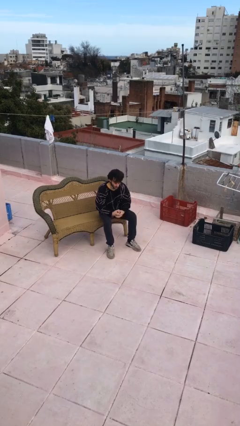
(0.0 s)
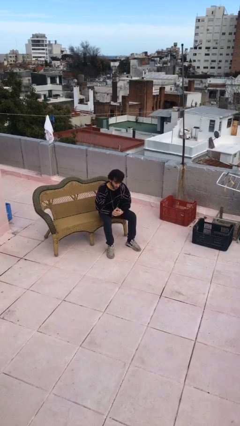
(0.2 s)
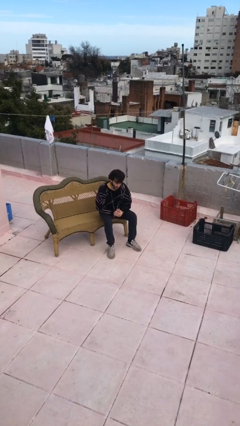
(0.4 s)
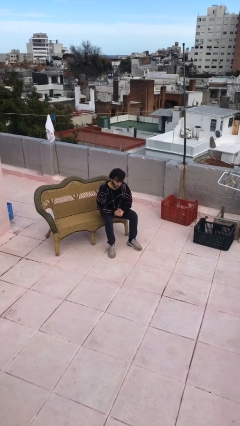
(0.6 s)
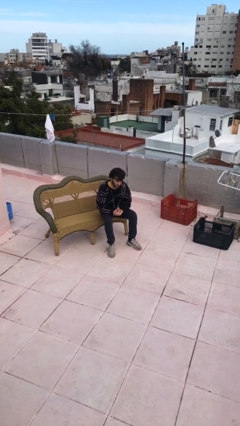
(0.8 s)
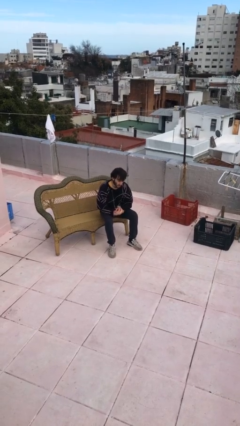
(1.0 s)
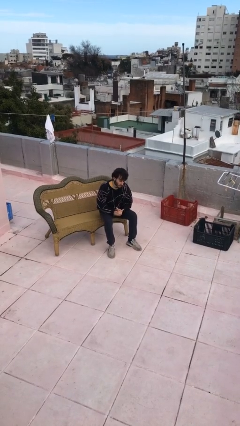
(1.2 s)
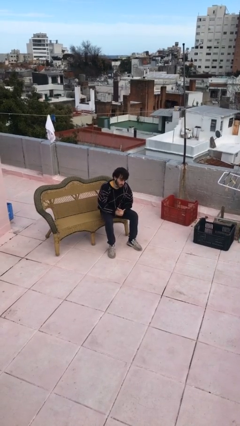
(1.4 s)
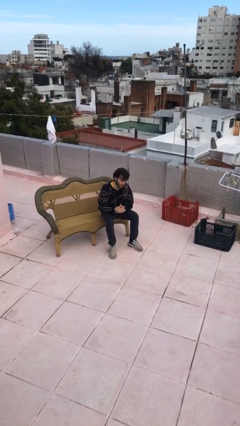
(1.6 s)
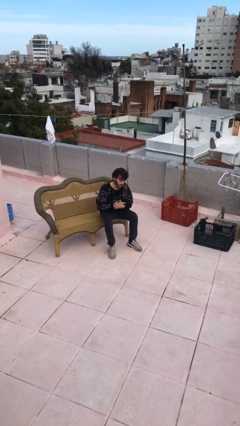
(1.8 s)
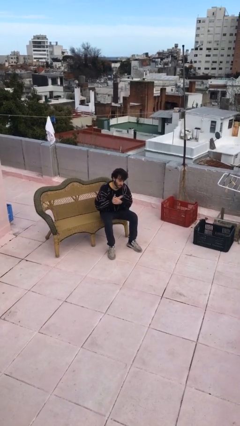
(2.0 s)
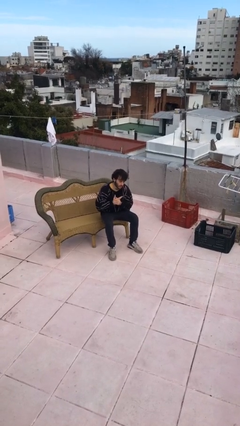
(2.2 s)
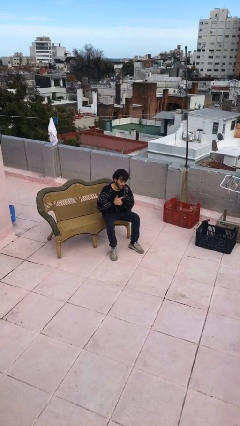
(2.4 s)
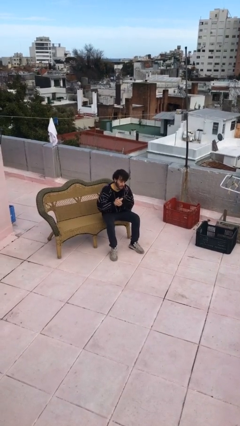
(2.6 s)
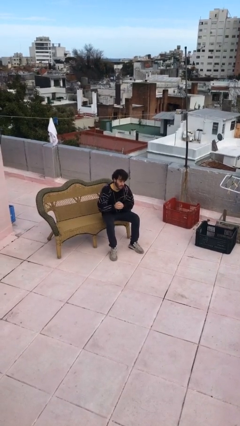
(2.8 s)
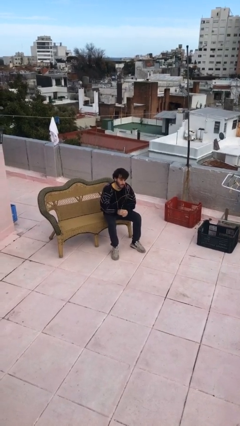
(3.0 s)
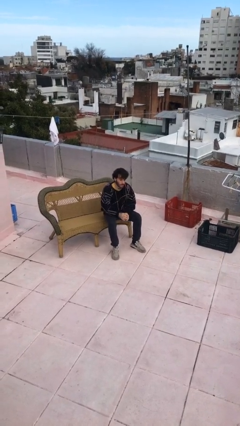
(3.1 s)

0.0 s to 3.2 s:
person cracks knuckles

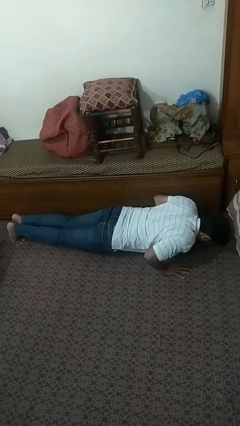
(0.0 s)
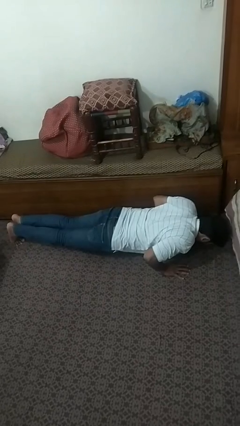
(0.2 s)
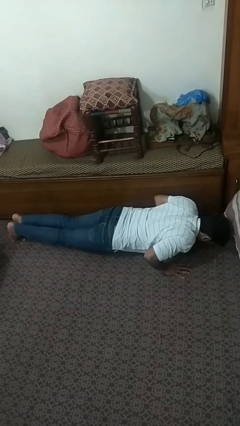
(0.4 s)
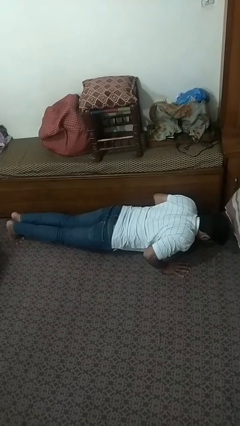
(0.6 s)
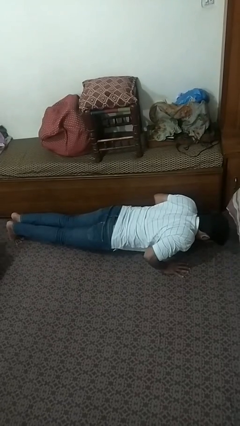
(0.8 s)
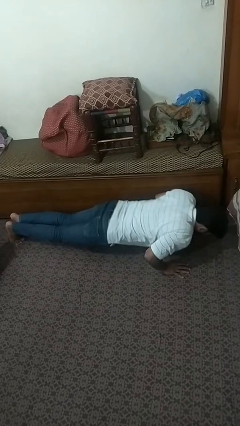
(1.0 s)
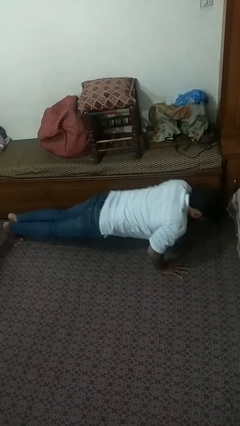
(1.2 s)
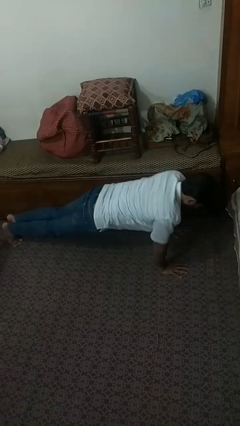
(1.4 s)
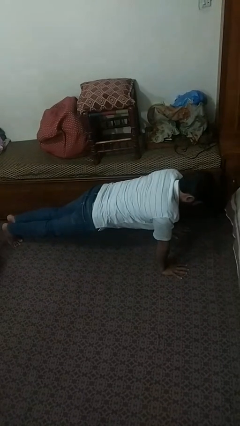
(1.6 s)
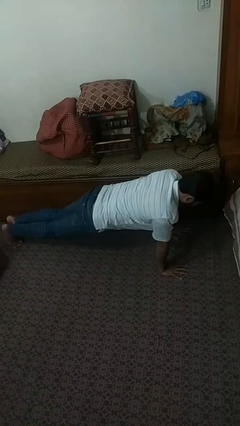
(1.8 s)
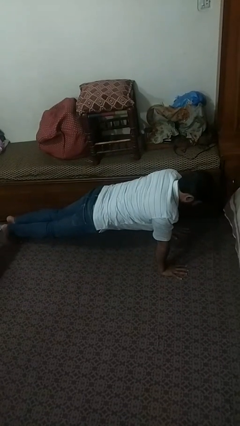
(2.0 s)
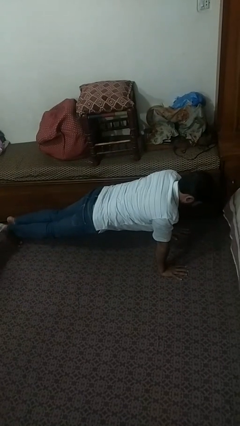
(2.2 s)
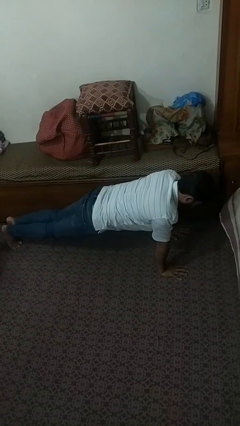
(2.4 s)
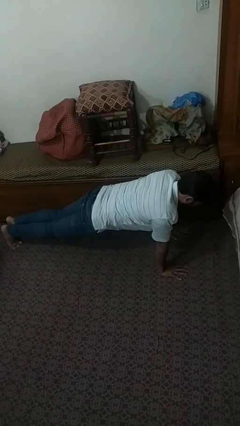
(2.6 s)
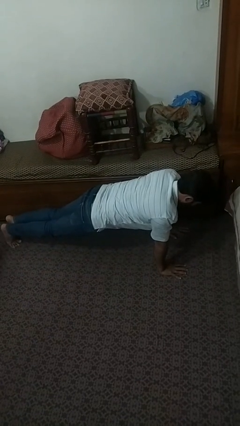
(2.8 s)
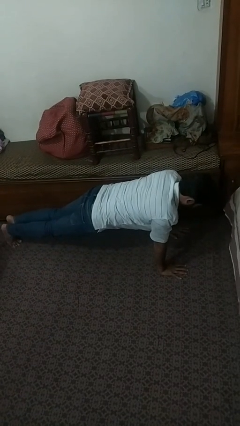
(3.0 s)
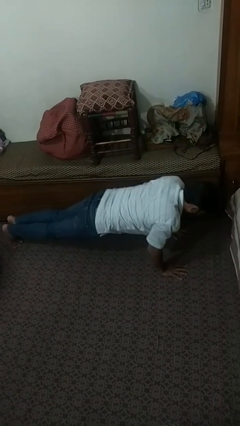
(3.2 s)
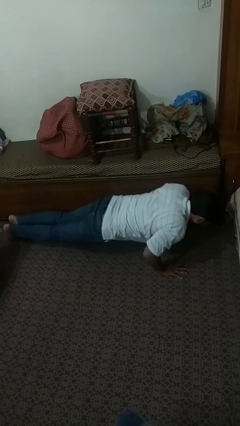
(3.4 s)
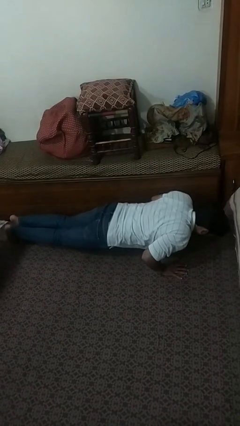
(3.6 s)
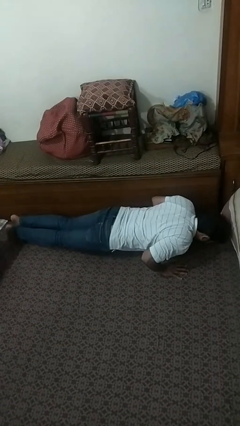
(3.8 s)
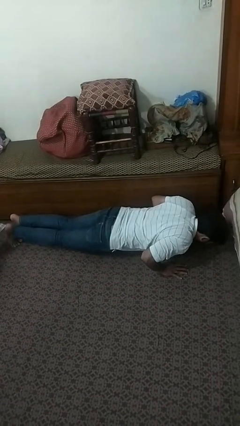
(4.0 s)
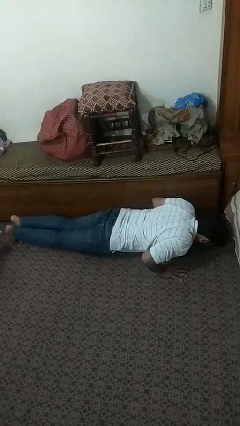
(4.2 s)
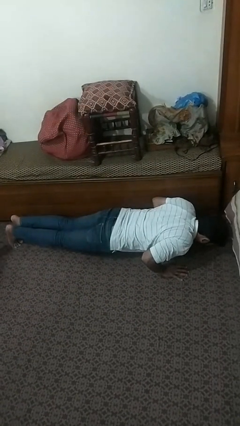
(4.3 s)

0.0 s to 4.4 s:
person exercises with pushup

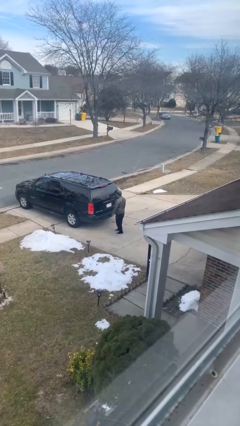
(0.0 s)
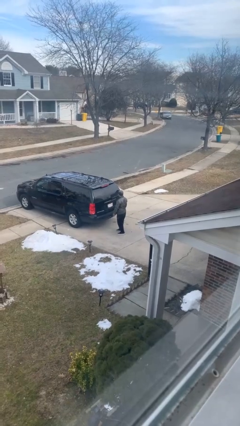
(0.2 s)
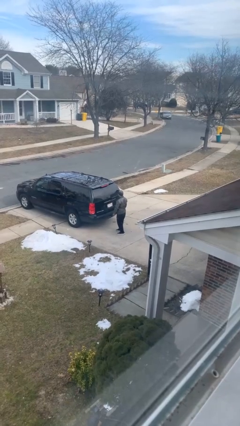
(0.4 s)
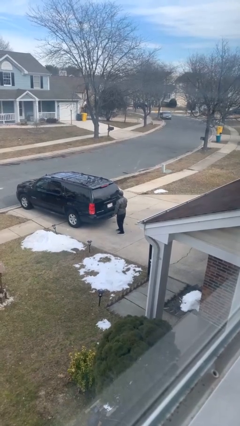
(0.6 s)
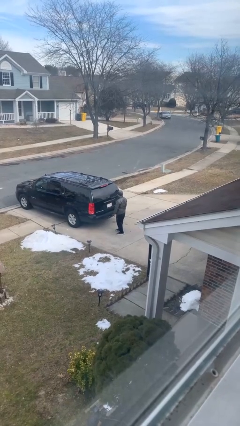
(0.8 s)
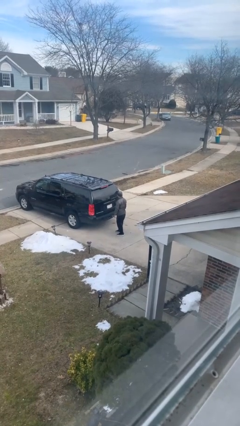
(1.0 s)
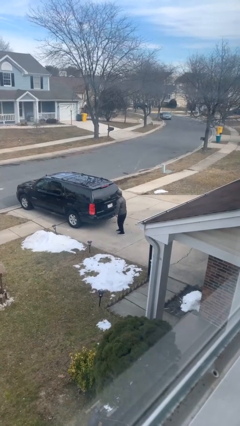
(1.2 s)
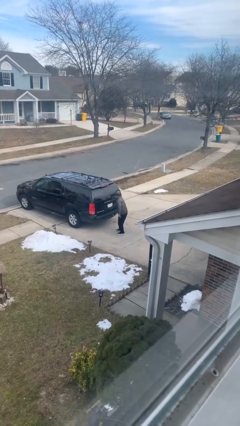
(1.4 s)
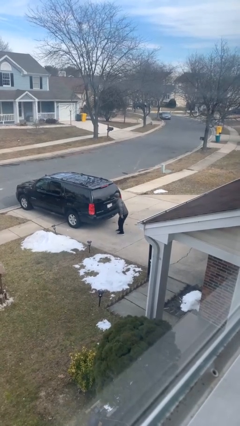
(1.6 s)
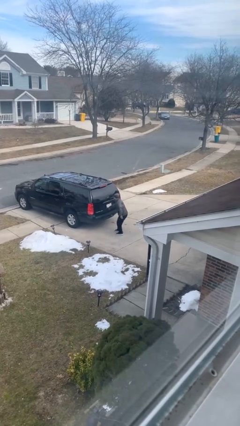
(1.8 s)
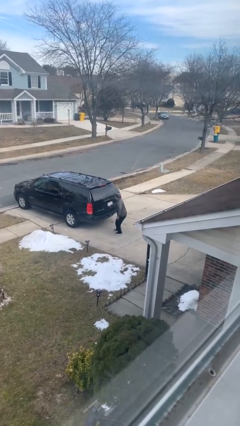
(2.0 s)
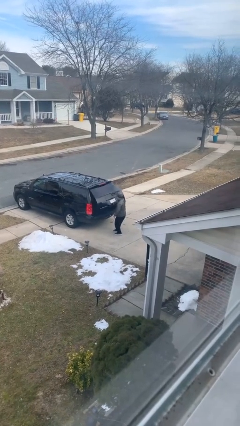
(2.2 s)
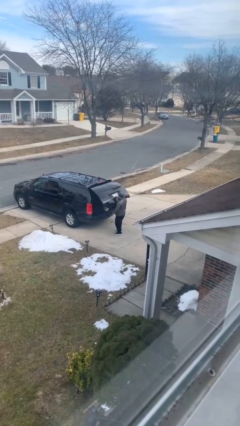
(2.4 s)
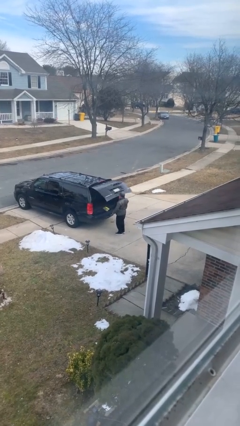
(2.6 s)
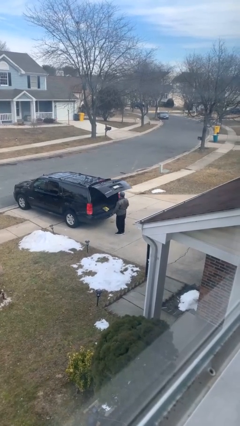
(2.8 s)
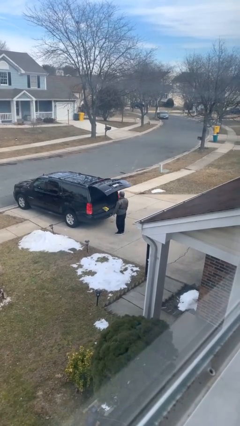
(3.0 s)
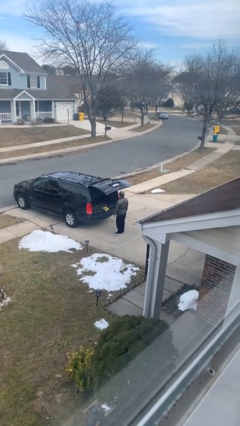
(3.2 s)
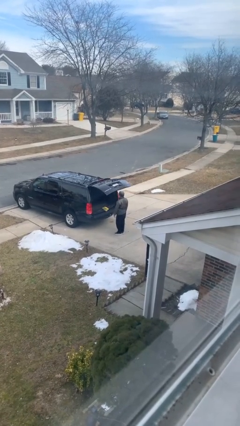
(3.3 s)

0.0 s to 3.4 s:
person opens car trunk

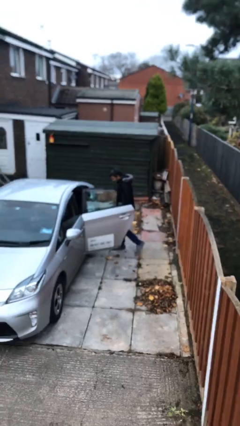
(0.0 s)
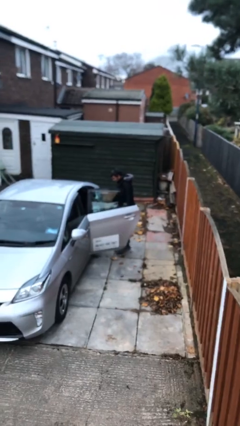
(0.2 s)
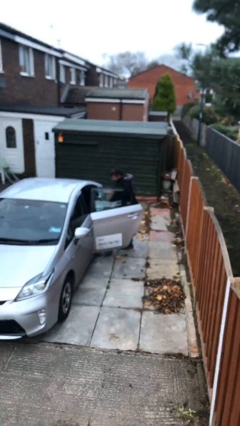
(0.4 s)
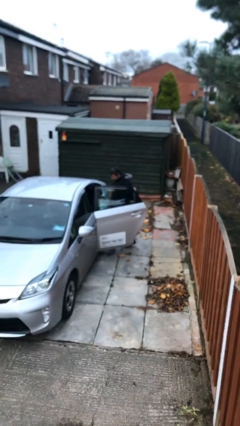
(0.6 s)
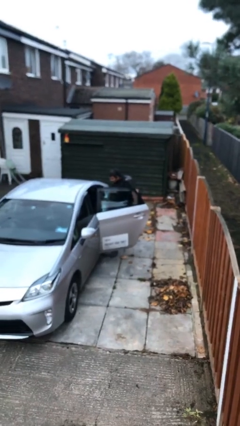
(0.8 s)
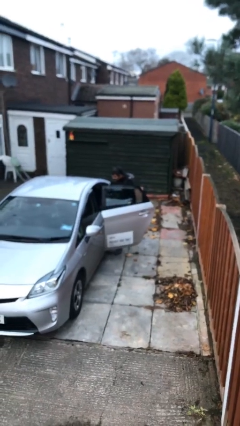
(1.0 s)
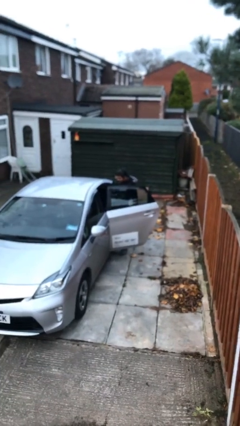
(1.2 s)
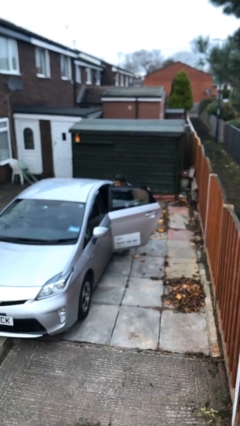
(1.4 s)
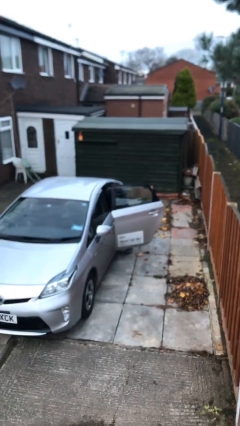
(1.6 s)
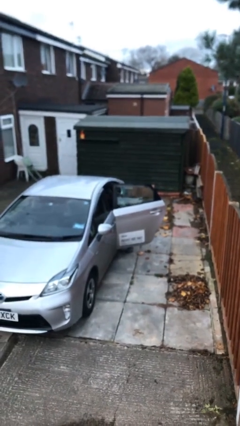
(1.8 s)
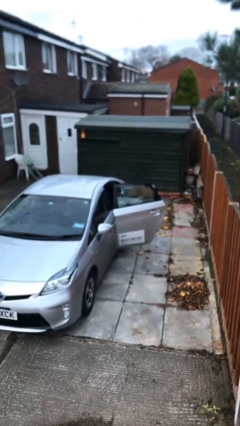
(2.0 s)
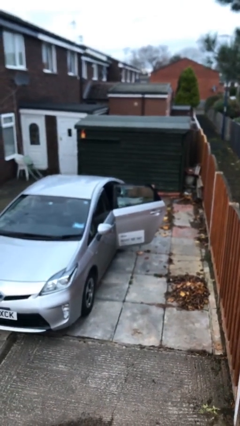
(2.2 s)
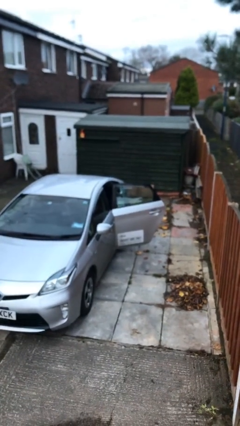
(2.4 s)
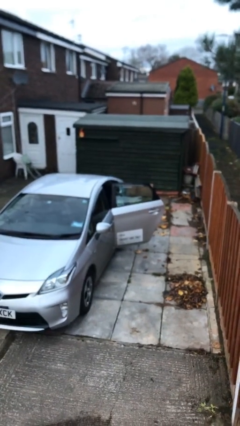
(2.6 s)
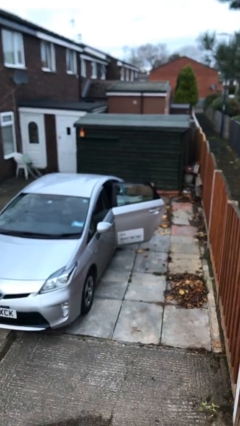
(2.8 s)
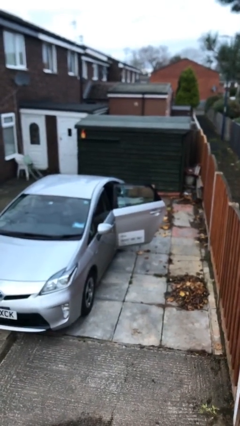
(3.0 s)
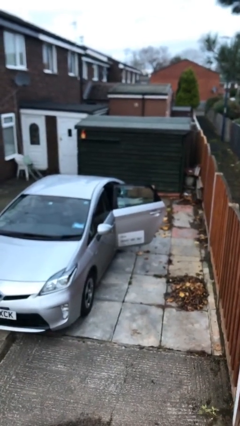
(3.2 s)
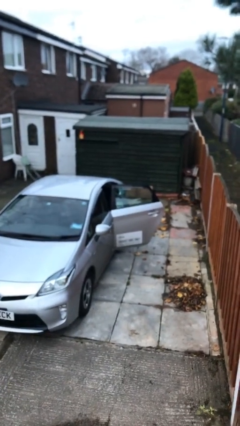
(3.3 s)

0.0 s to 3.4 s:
person enters car

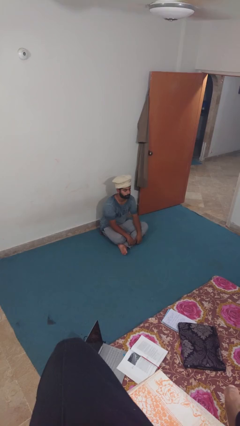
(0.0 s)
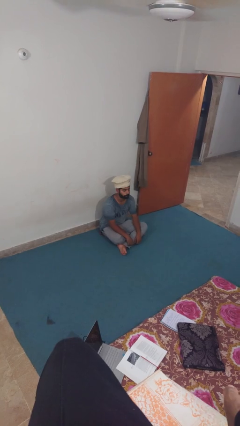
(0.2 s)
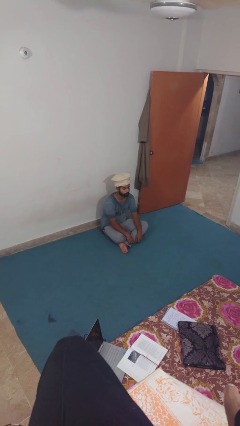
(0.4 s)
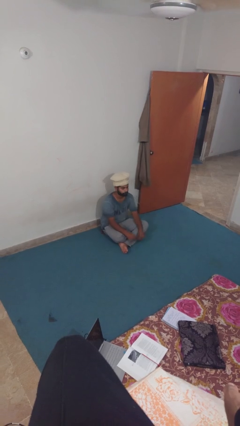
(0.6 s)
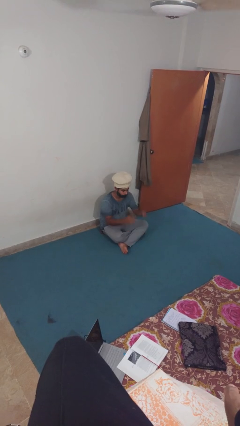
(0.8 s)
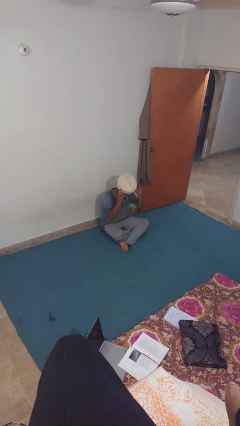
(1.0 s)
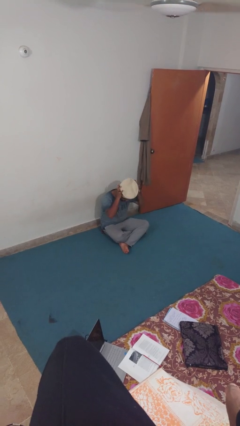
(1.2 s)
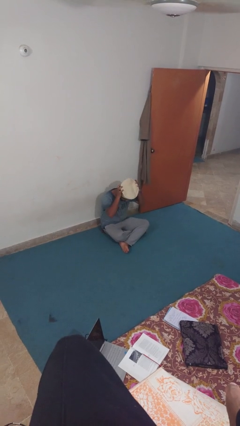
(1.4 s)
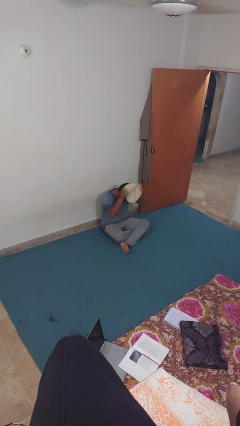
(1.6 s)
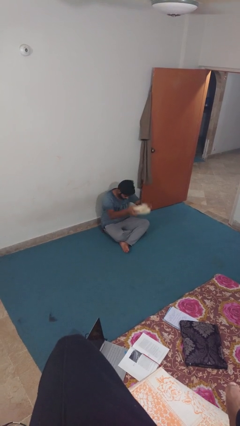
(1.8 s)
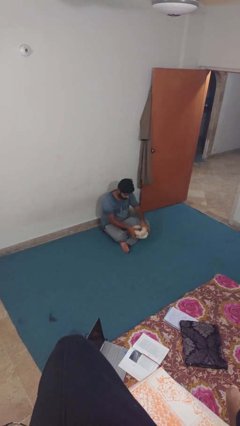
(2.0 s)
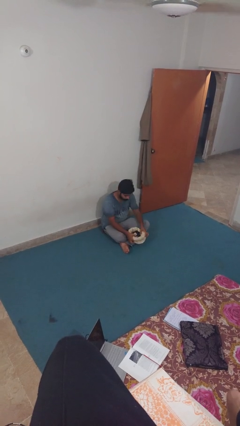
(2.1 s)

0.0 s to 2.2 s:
person takes off hat

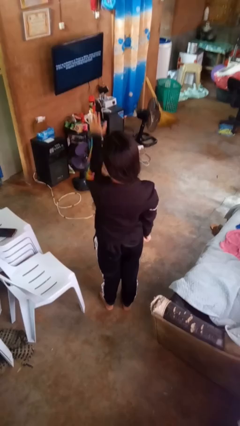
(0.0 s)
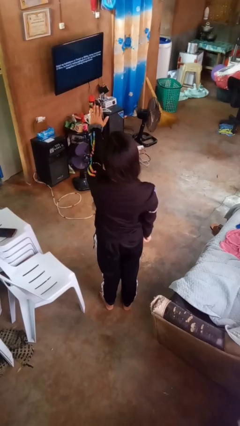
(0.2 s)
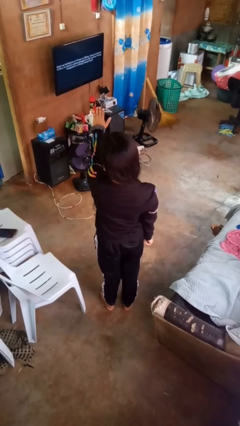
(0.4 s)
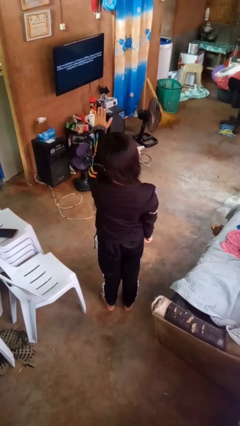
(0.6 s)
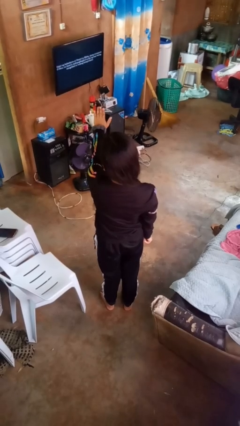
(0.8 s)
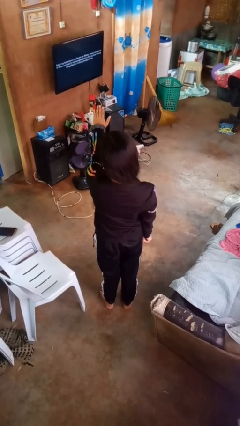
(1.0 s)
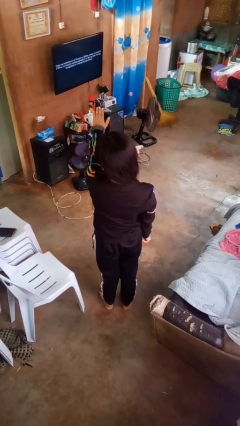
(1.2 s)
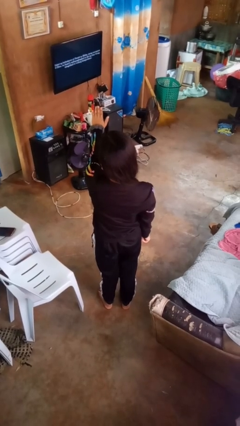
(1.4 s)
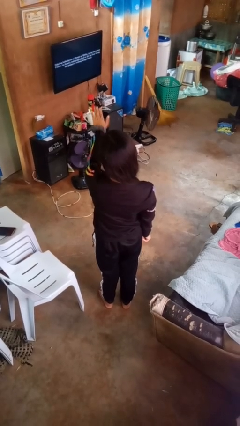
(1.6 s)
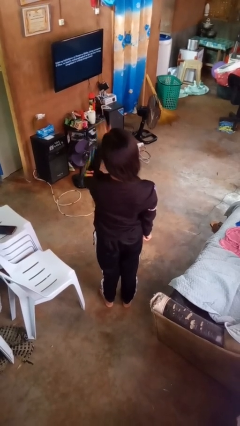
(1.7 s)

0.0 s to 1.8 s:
person gestures stop
